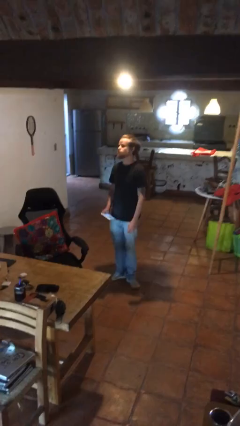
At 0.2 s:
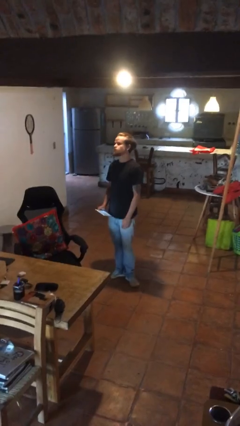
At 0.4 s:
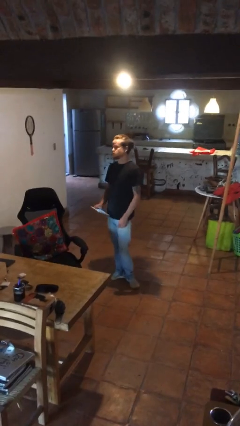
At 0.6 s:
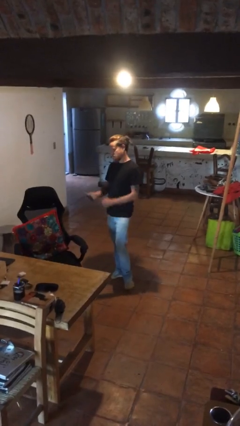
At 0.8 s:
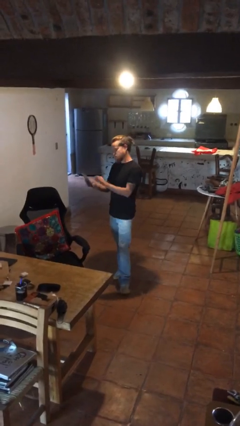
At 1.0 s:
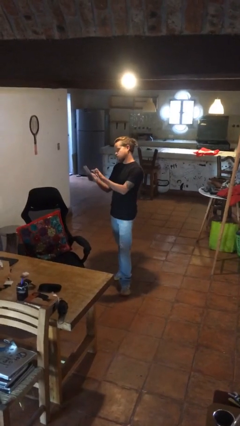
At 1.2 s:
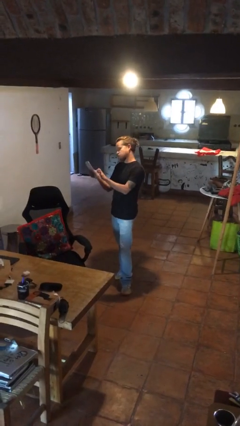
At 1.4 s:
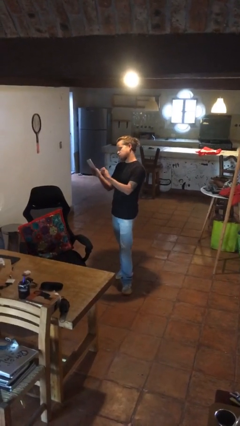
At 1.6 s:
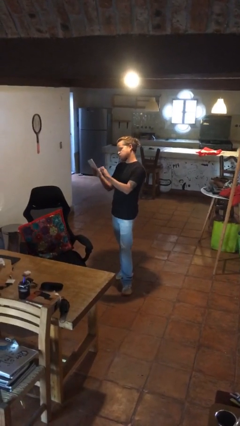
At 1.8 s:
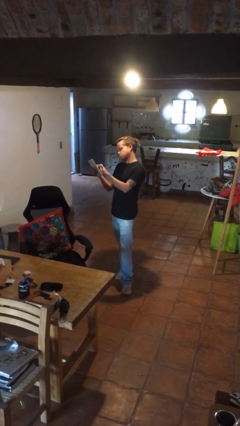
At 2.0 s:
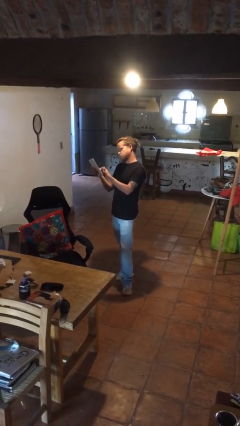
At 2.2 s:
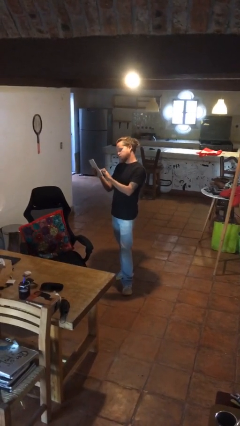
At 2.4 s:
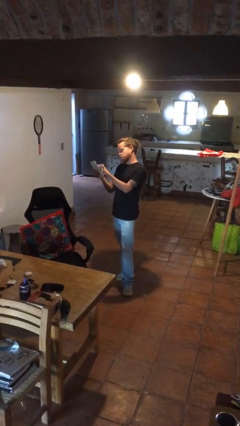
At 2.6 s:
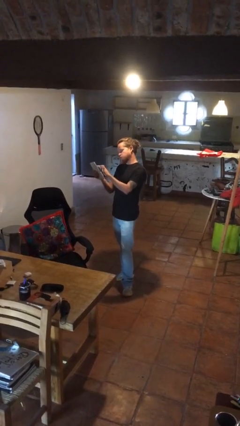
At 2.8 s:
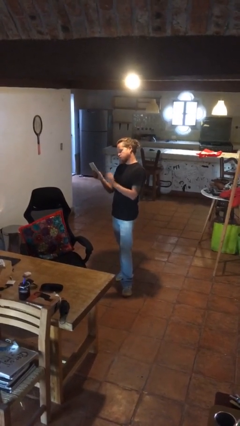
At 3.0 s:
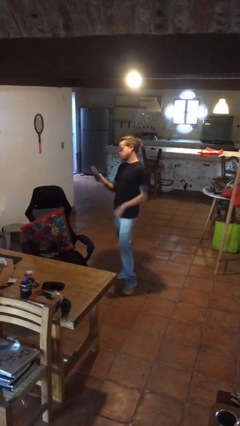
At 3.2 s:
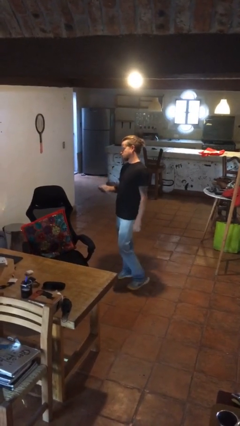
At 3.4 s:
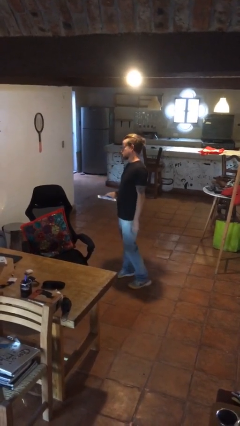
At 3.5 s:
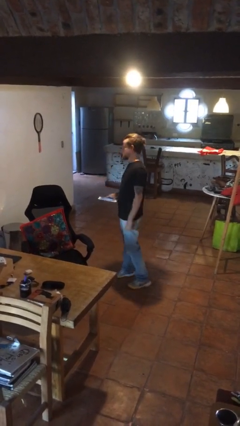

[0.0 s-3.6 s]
person interacts with tablet

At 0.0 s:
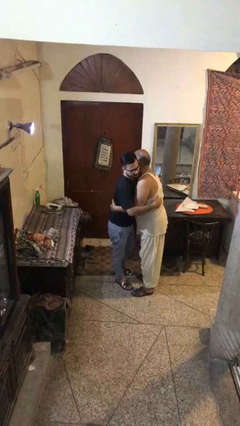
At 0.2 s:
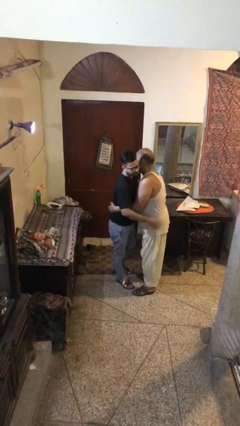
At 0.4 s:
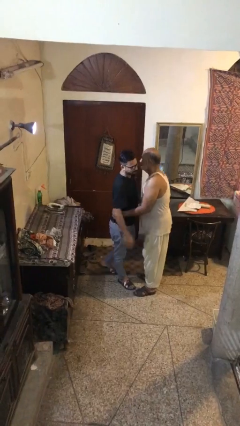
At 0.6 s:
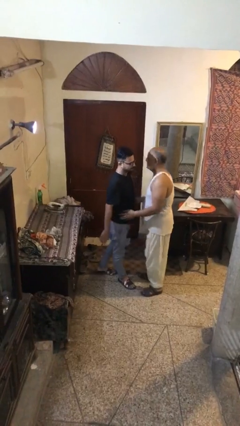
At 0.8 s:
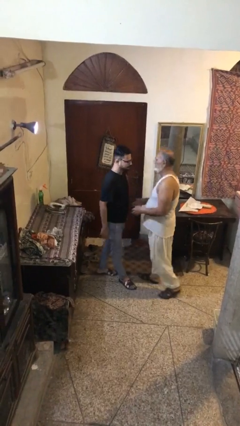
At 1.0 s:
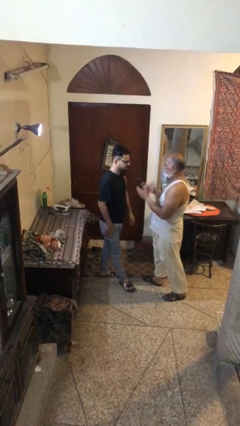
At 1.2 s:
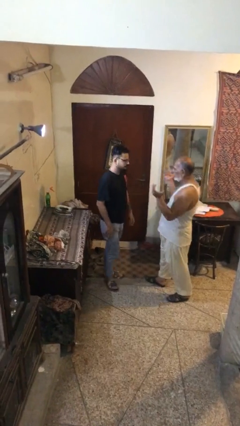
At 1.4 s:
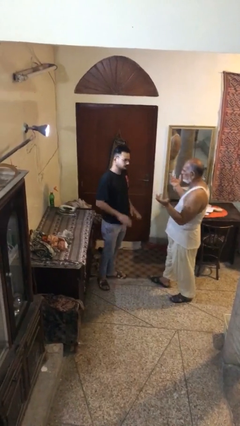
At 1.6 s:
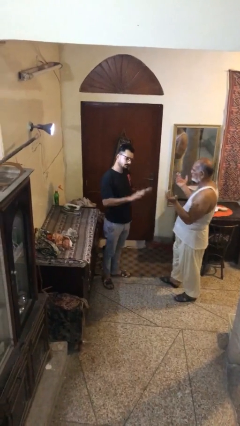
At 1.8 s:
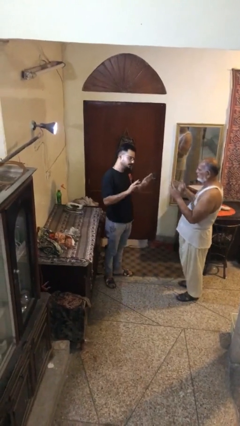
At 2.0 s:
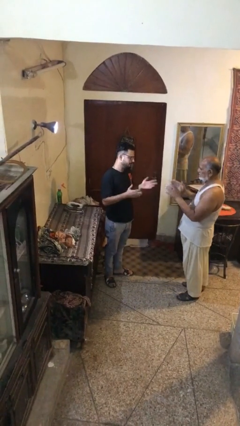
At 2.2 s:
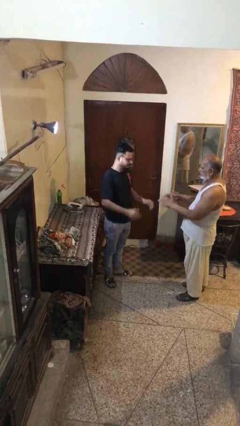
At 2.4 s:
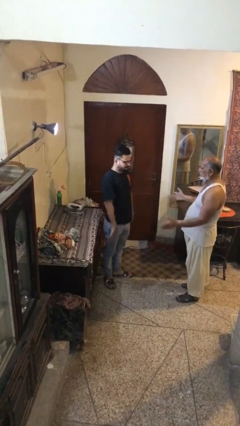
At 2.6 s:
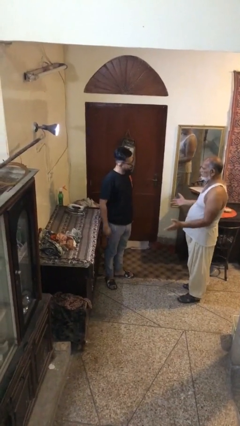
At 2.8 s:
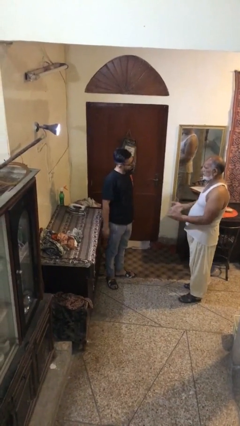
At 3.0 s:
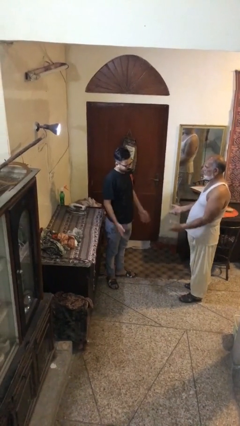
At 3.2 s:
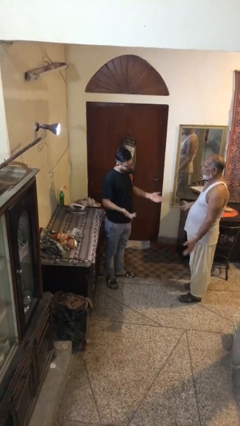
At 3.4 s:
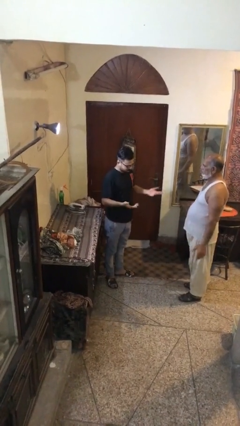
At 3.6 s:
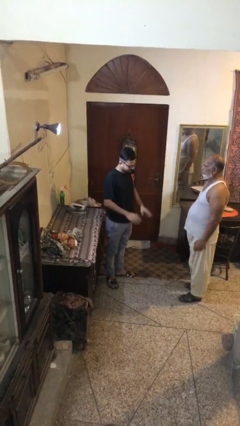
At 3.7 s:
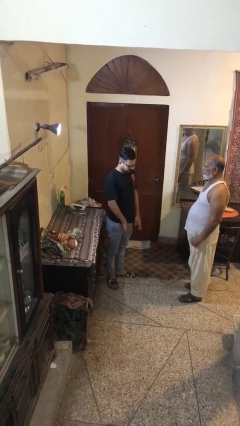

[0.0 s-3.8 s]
person talks to person

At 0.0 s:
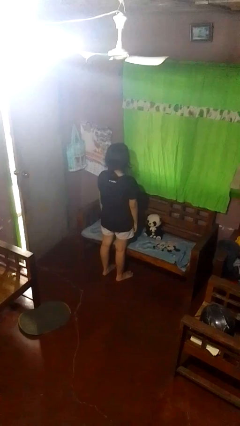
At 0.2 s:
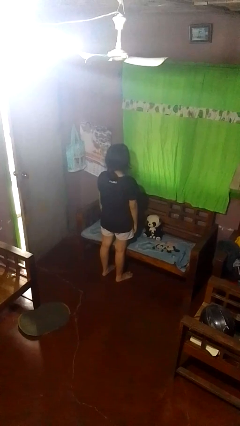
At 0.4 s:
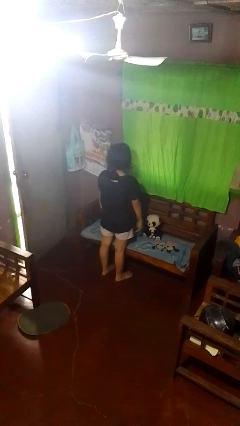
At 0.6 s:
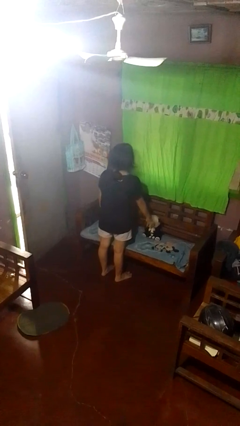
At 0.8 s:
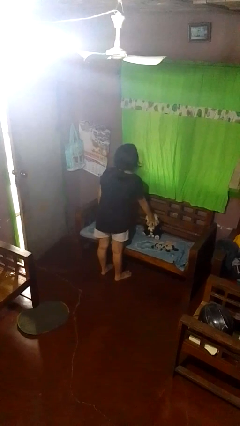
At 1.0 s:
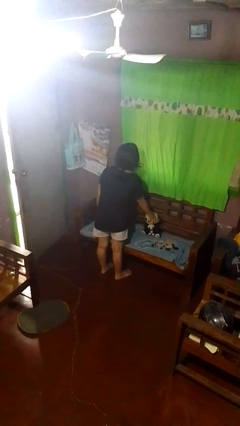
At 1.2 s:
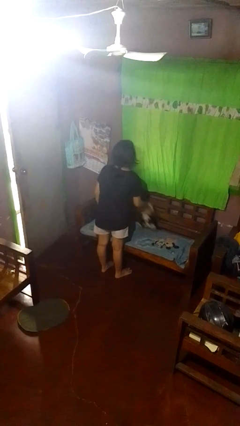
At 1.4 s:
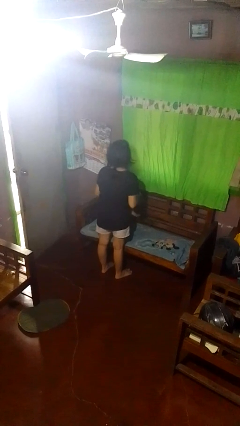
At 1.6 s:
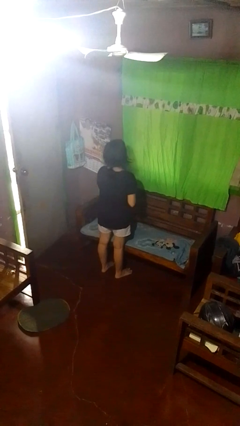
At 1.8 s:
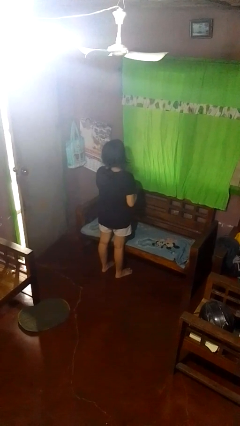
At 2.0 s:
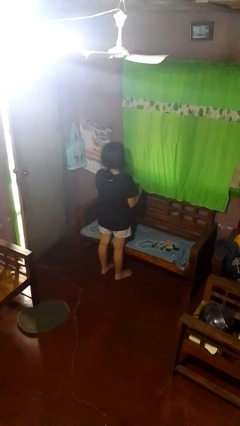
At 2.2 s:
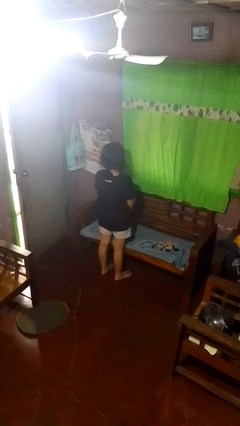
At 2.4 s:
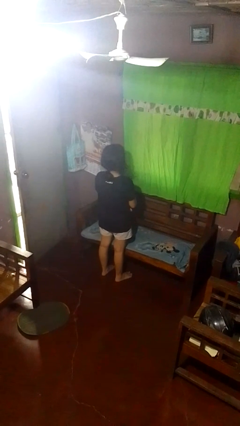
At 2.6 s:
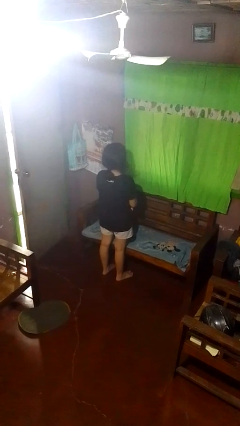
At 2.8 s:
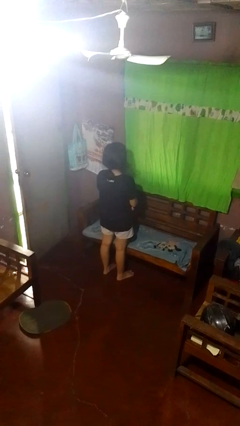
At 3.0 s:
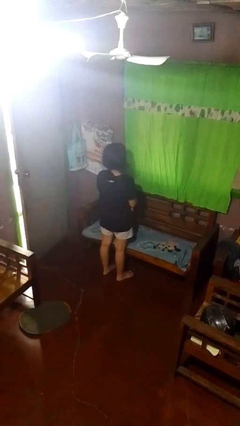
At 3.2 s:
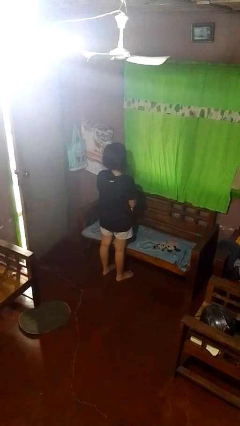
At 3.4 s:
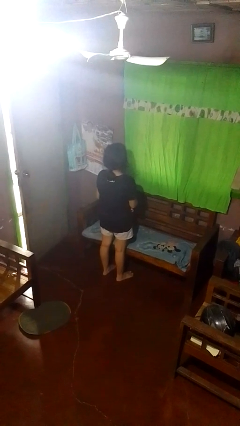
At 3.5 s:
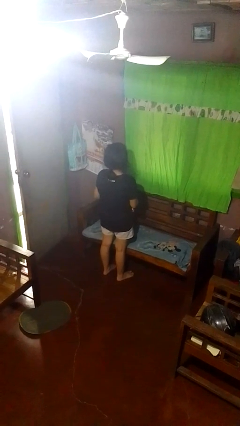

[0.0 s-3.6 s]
person picks up object from couch

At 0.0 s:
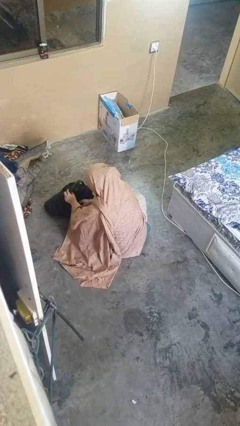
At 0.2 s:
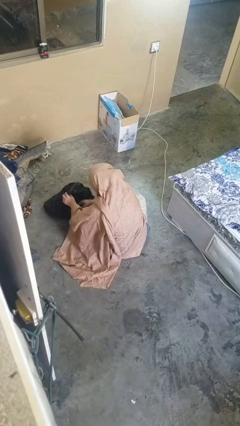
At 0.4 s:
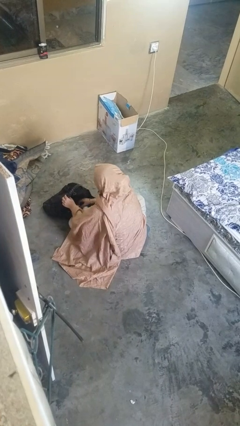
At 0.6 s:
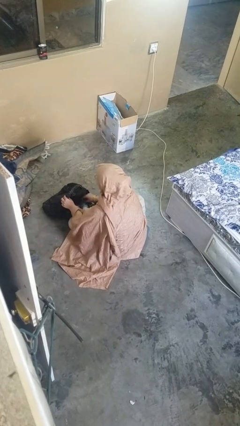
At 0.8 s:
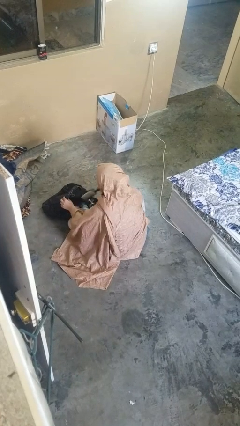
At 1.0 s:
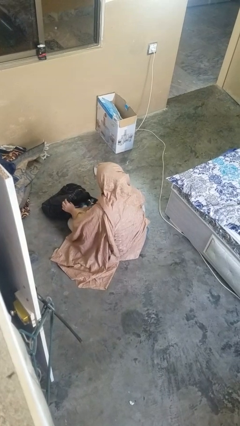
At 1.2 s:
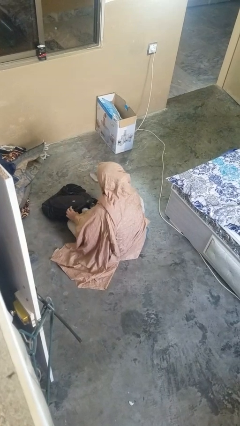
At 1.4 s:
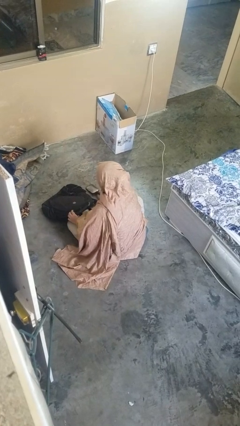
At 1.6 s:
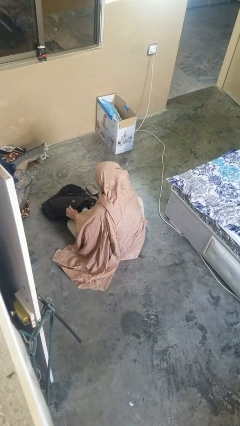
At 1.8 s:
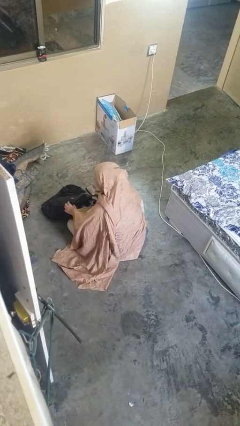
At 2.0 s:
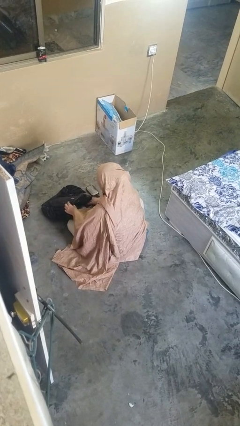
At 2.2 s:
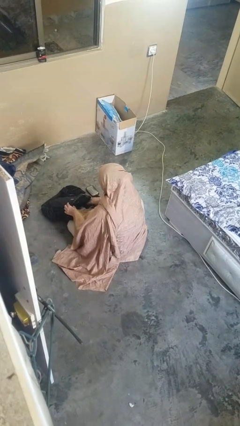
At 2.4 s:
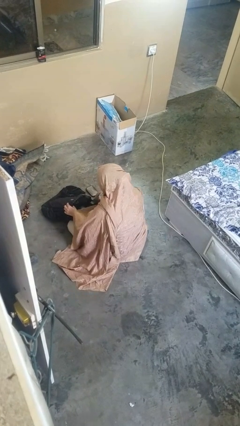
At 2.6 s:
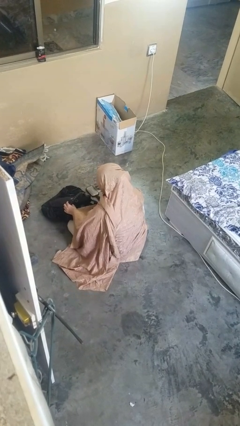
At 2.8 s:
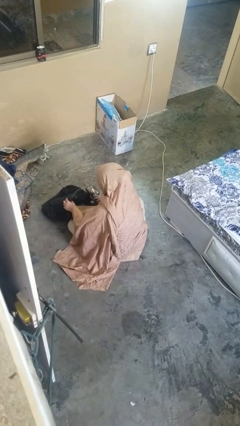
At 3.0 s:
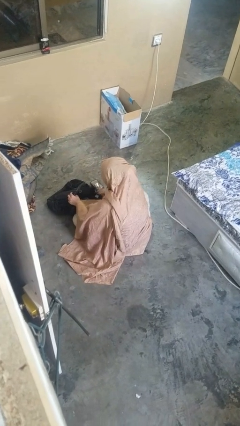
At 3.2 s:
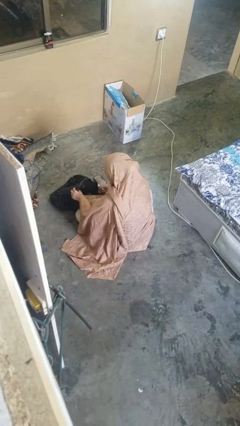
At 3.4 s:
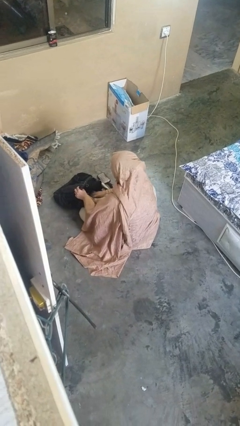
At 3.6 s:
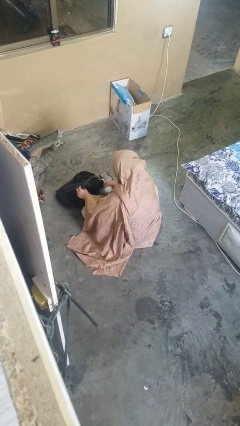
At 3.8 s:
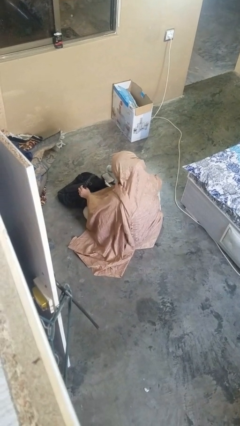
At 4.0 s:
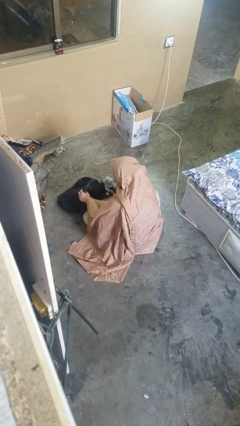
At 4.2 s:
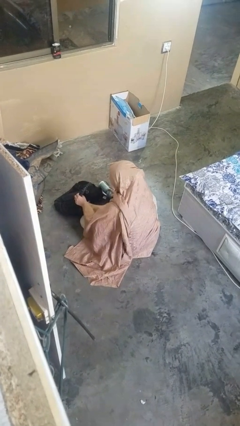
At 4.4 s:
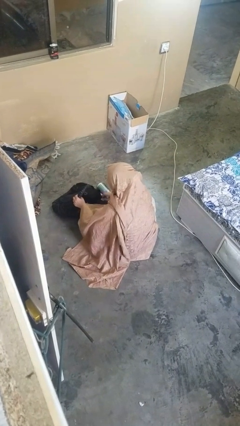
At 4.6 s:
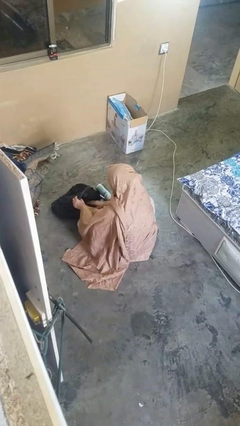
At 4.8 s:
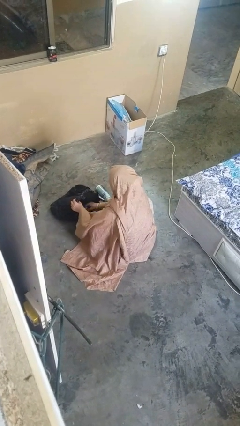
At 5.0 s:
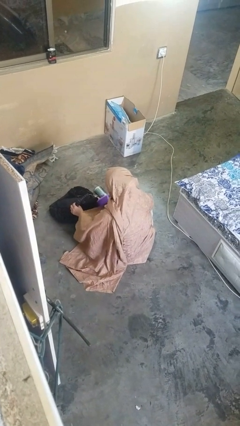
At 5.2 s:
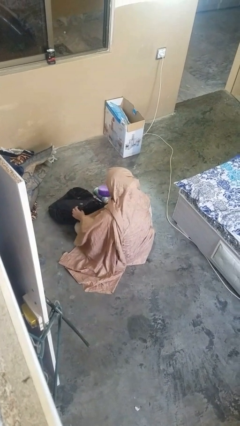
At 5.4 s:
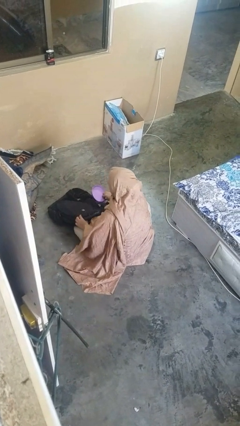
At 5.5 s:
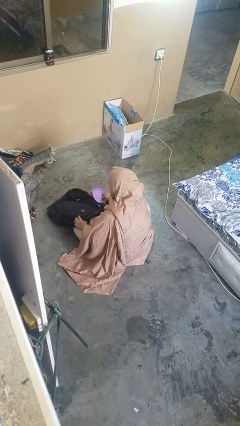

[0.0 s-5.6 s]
person takes object from backpack

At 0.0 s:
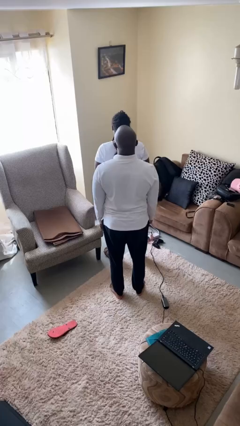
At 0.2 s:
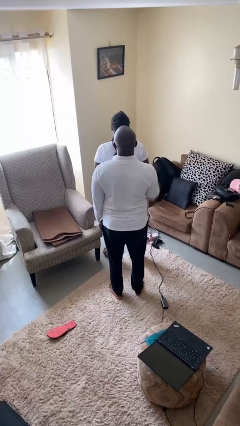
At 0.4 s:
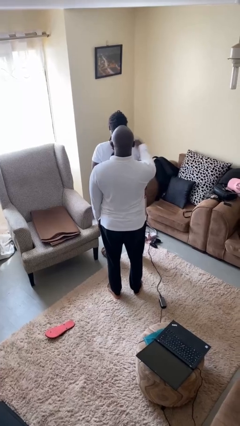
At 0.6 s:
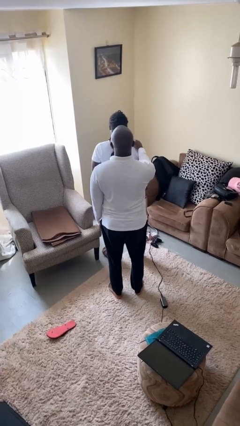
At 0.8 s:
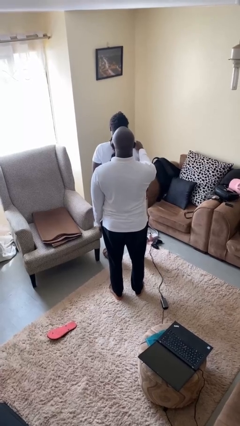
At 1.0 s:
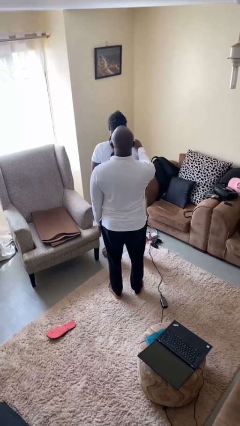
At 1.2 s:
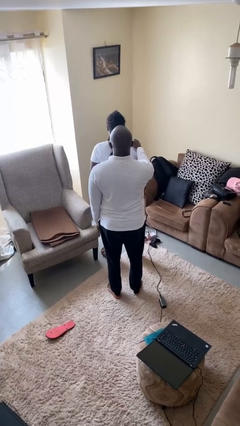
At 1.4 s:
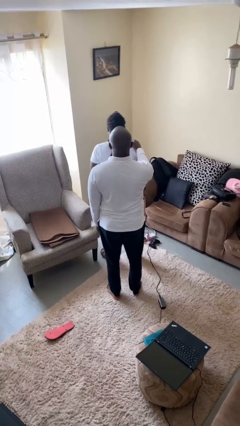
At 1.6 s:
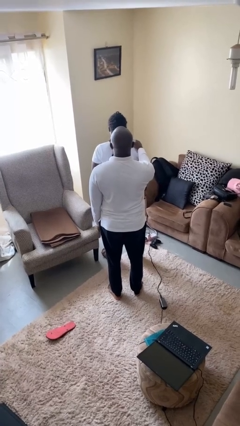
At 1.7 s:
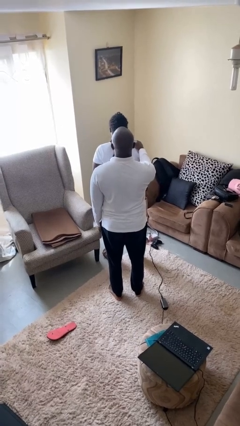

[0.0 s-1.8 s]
person grabs person by shoulder
